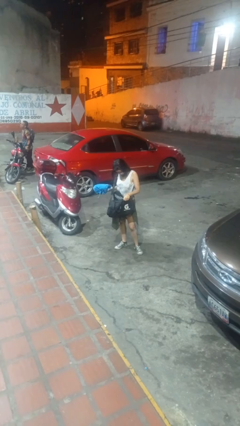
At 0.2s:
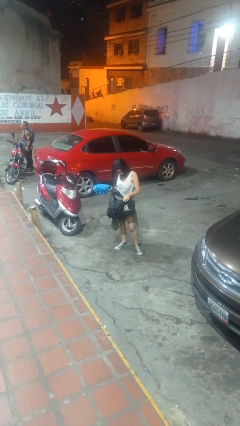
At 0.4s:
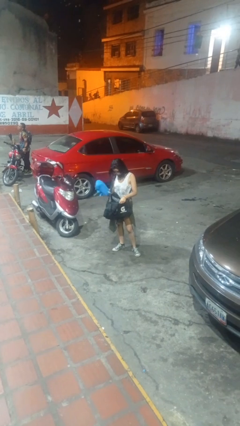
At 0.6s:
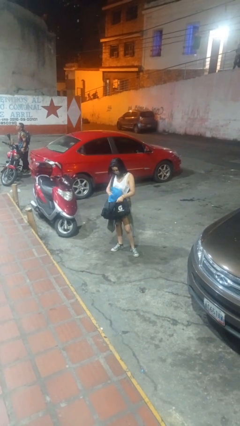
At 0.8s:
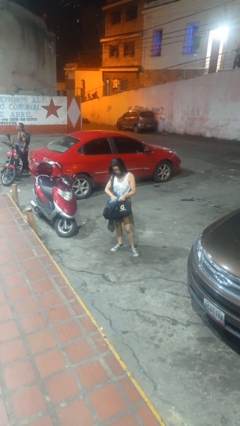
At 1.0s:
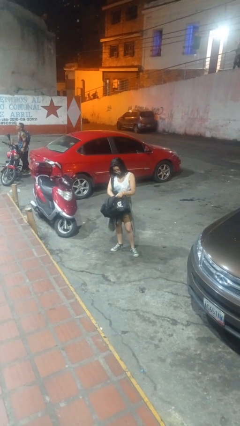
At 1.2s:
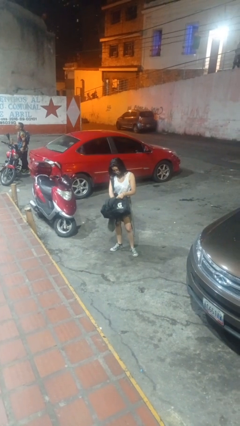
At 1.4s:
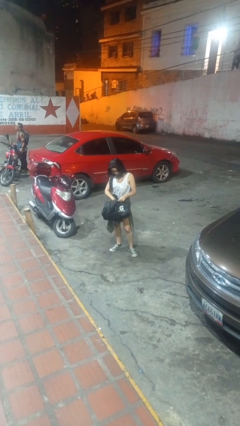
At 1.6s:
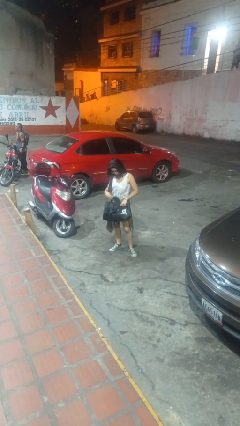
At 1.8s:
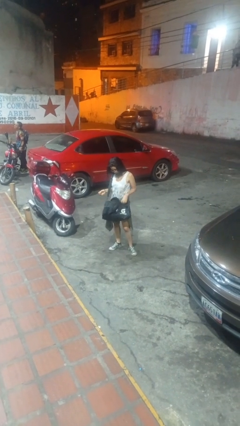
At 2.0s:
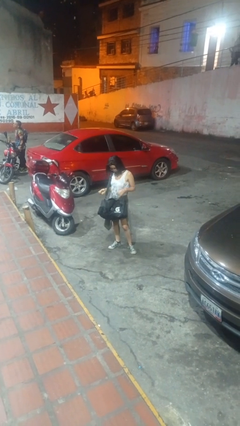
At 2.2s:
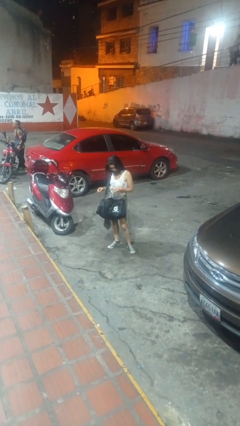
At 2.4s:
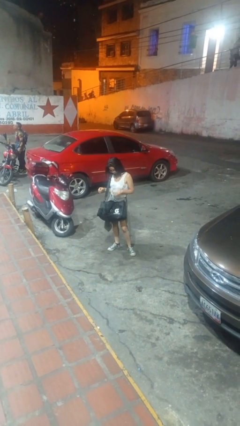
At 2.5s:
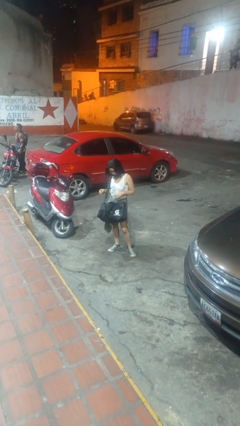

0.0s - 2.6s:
person puts object into purse

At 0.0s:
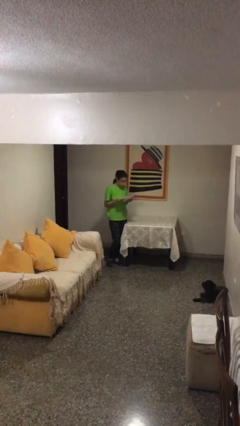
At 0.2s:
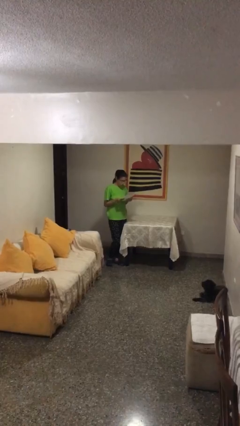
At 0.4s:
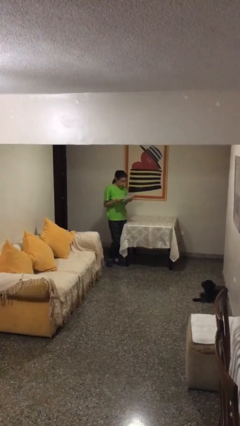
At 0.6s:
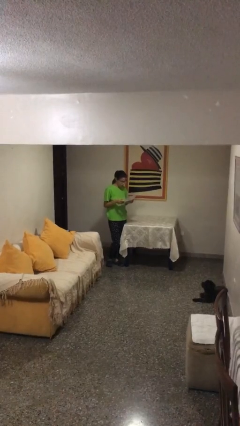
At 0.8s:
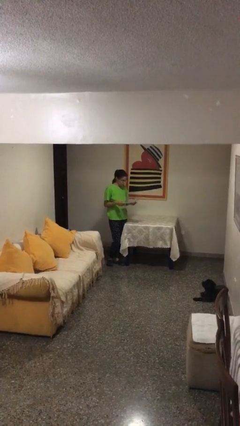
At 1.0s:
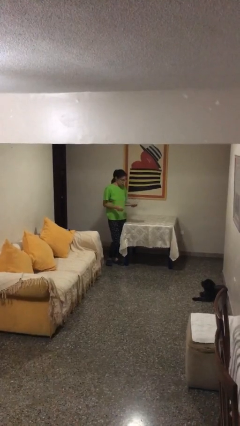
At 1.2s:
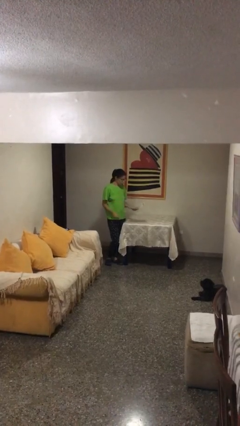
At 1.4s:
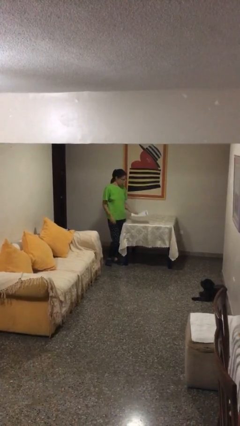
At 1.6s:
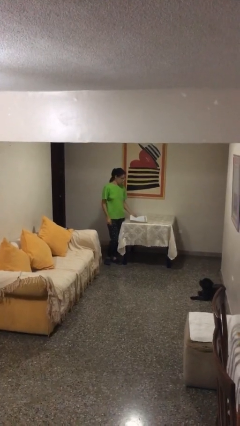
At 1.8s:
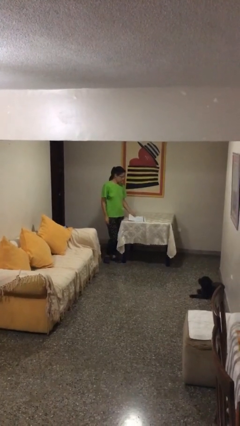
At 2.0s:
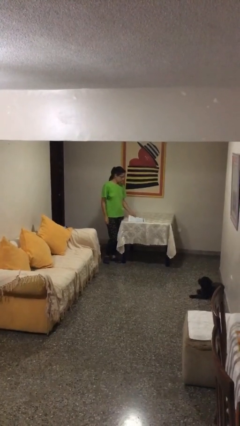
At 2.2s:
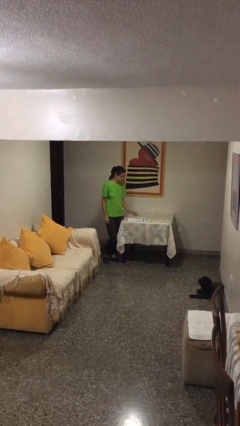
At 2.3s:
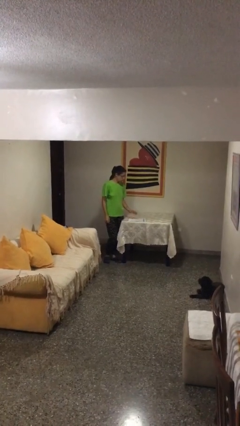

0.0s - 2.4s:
person puts down object on table

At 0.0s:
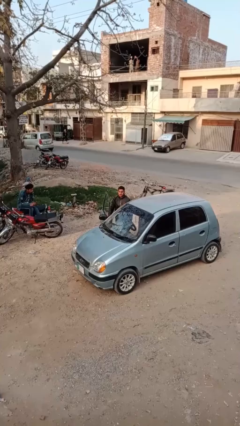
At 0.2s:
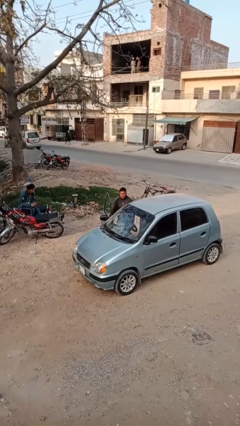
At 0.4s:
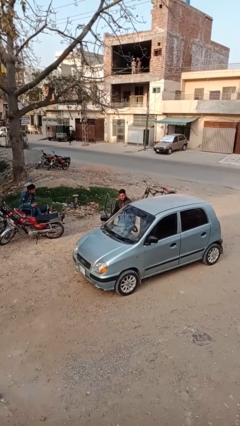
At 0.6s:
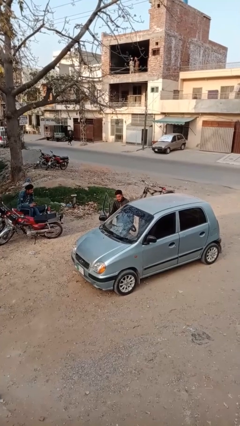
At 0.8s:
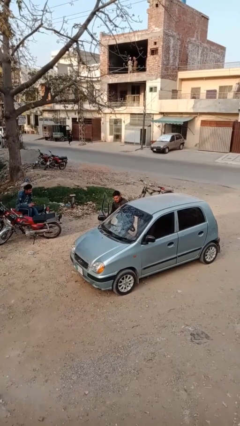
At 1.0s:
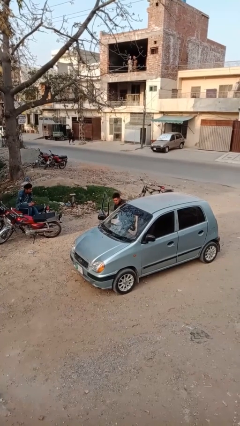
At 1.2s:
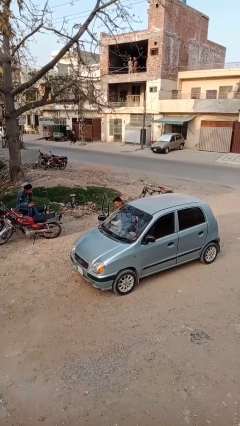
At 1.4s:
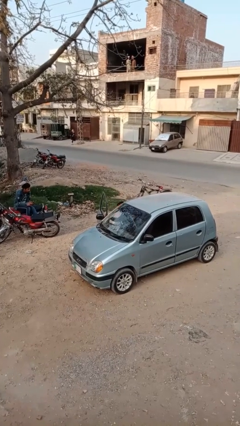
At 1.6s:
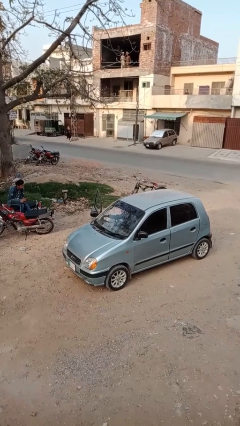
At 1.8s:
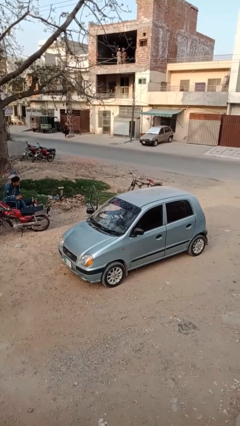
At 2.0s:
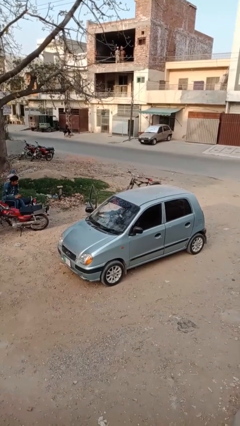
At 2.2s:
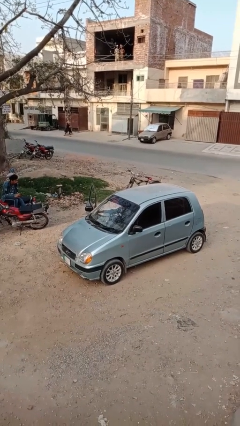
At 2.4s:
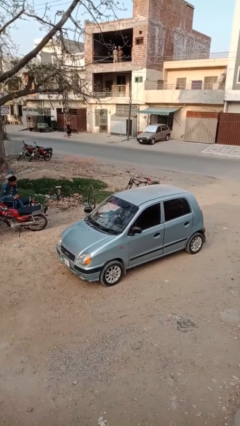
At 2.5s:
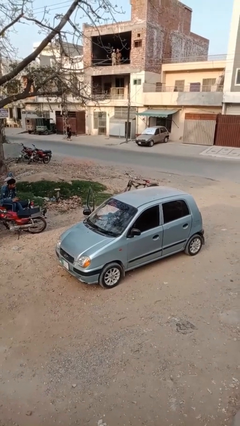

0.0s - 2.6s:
person enters car

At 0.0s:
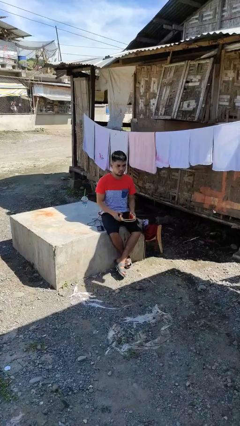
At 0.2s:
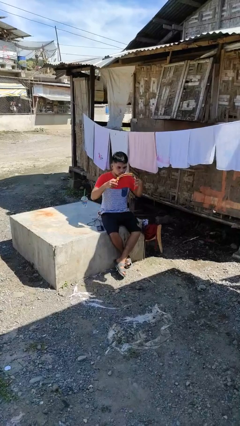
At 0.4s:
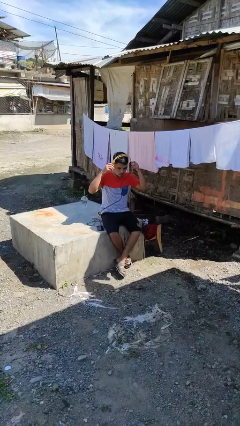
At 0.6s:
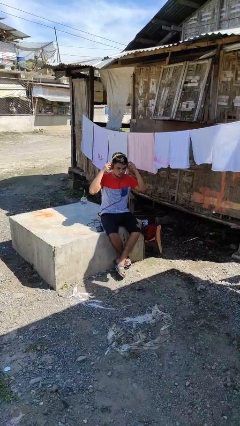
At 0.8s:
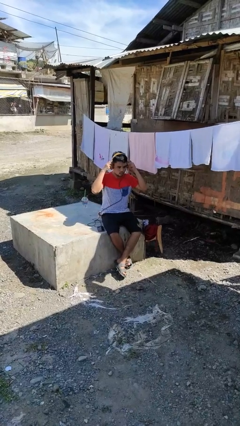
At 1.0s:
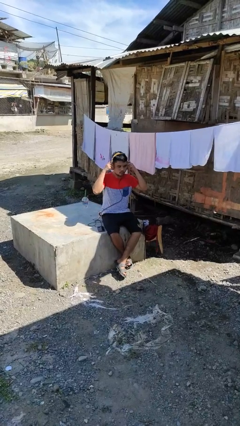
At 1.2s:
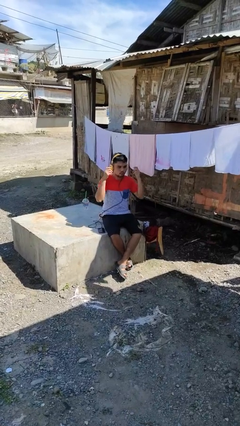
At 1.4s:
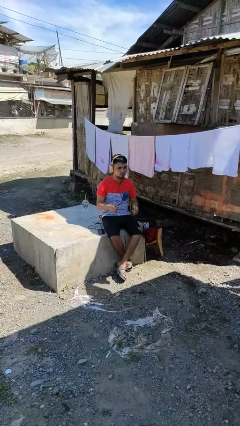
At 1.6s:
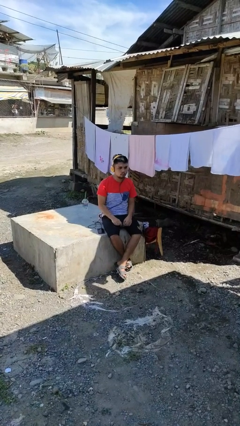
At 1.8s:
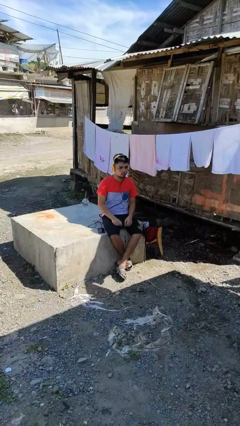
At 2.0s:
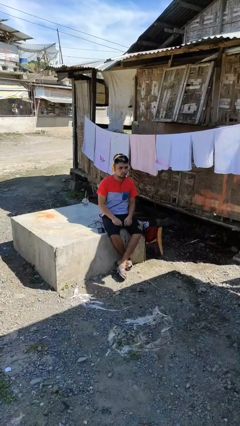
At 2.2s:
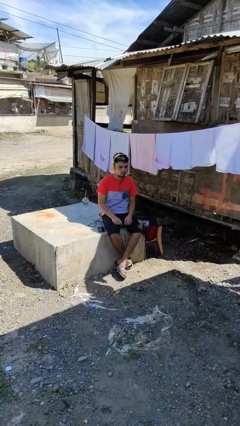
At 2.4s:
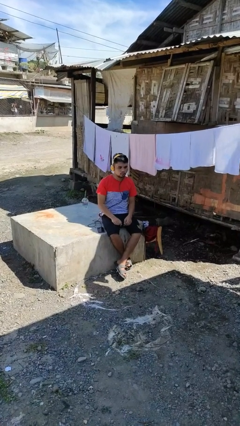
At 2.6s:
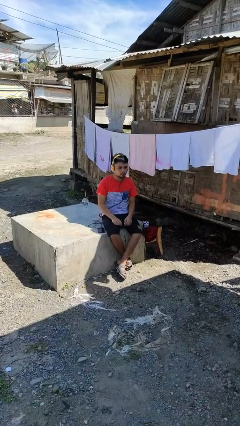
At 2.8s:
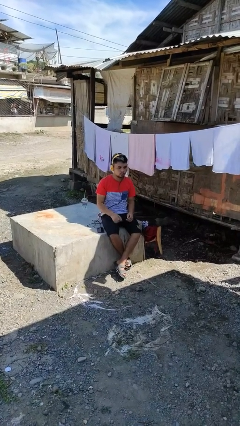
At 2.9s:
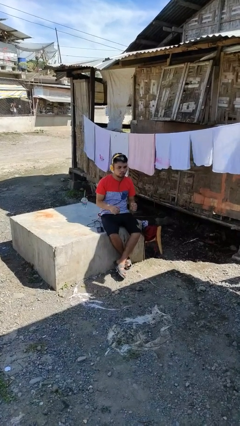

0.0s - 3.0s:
person puts on headphones

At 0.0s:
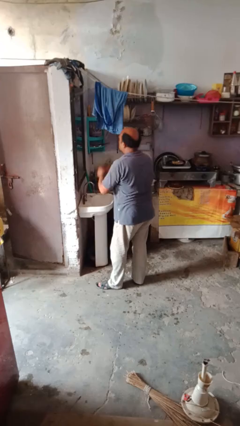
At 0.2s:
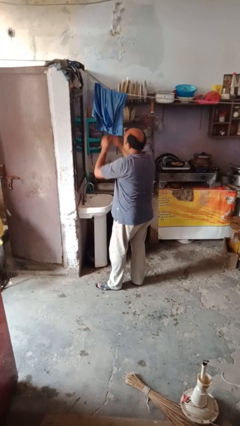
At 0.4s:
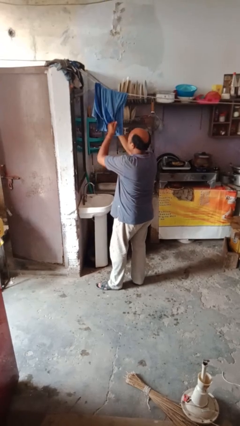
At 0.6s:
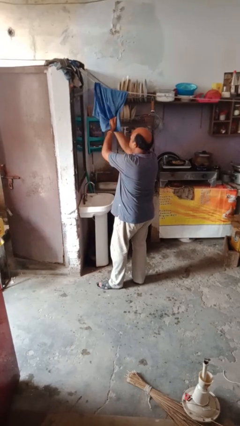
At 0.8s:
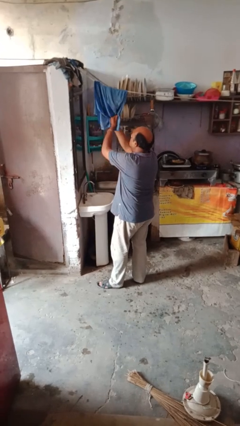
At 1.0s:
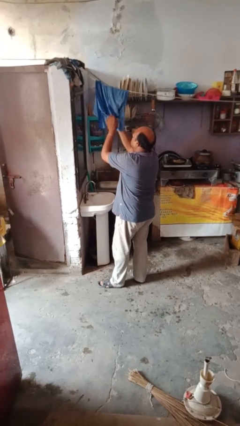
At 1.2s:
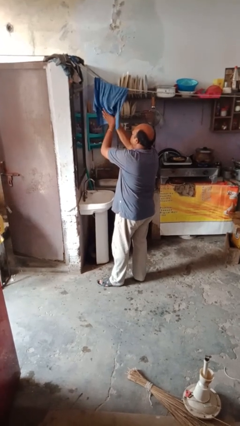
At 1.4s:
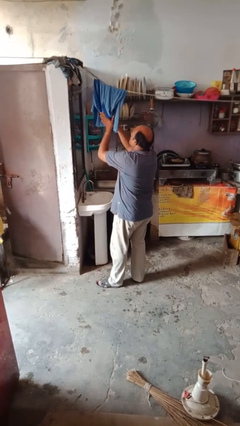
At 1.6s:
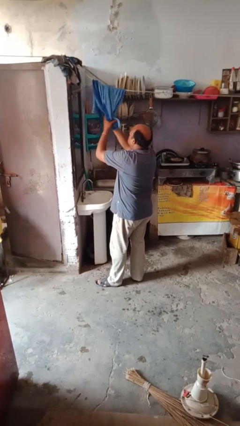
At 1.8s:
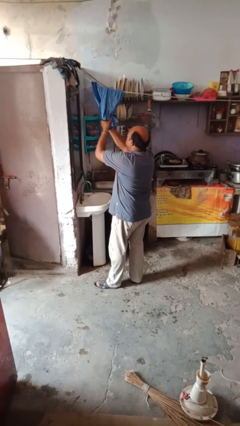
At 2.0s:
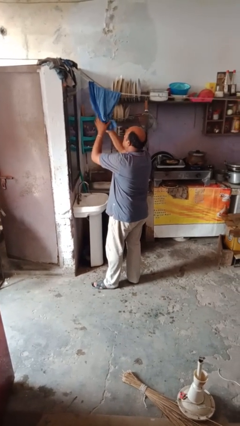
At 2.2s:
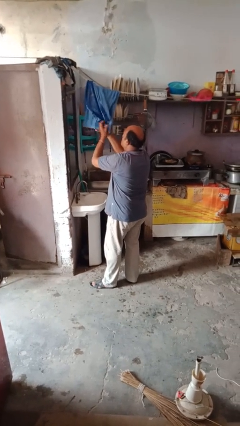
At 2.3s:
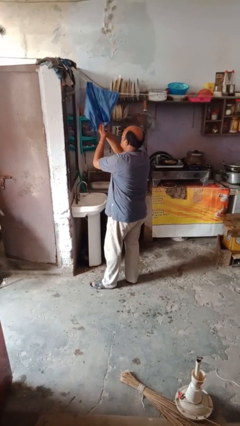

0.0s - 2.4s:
person dries hands with towel

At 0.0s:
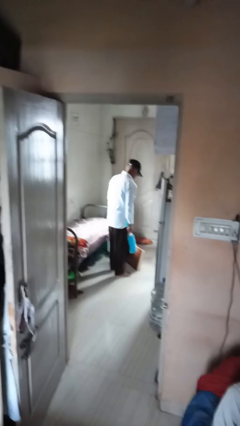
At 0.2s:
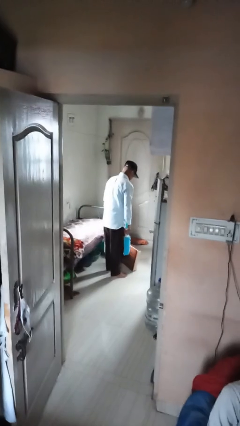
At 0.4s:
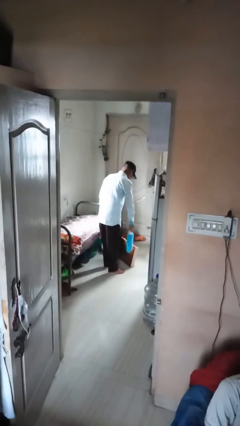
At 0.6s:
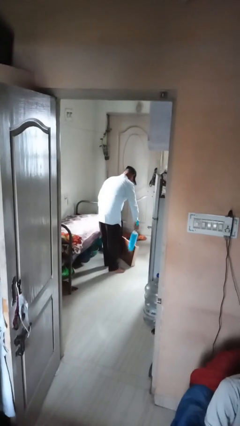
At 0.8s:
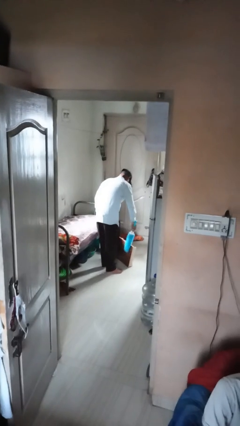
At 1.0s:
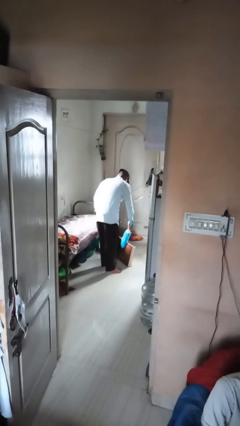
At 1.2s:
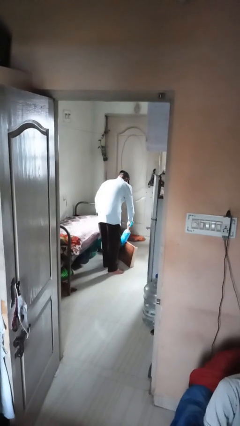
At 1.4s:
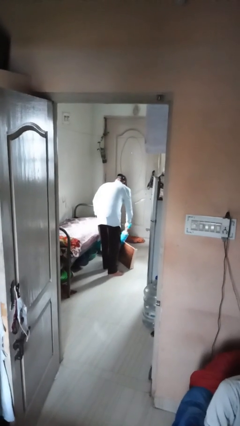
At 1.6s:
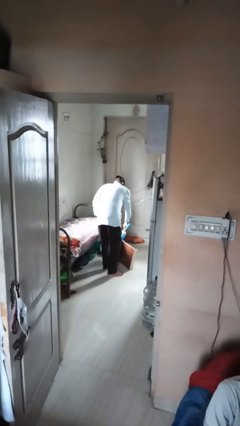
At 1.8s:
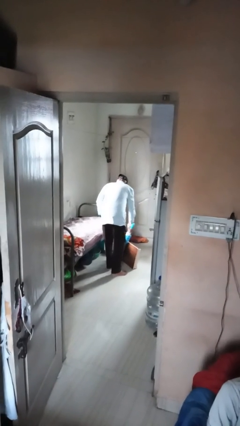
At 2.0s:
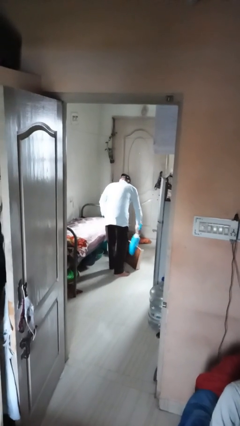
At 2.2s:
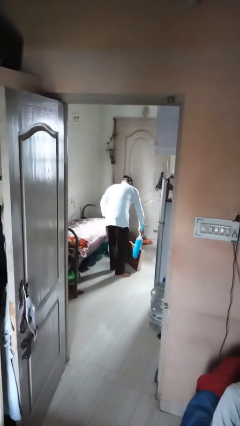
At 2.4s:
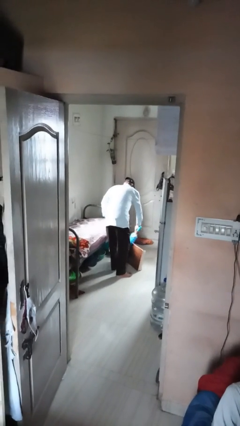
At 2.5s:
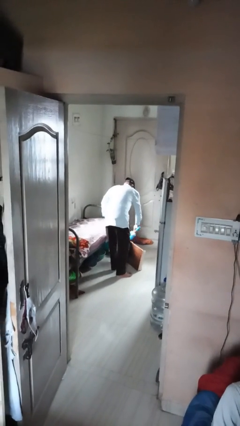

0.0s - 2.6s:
person dusts furniture

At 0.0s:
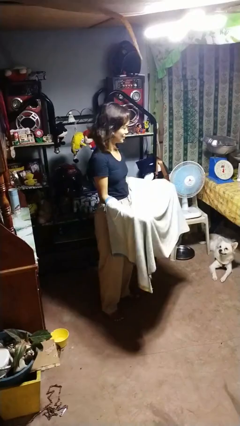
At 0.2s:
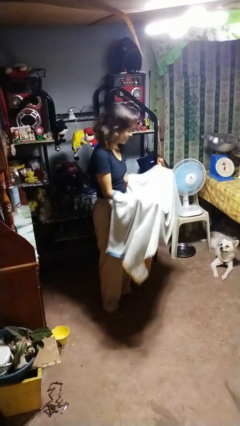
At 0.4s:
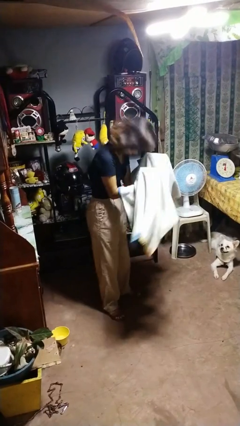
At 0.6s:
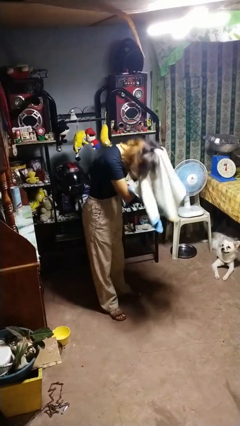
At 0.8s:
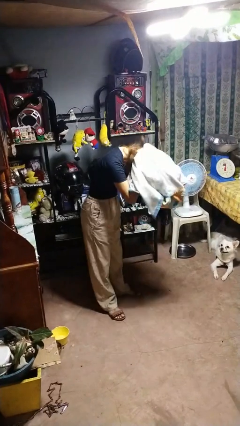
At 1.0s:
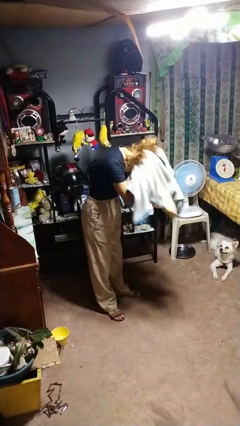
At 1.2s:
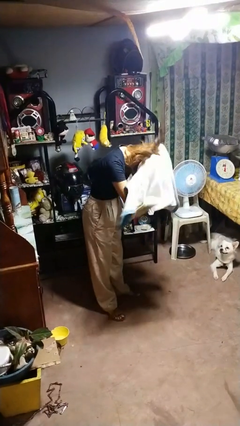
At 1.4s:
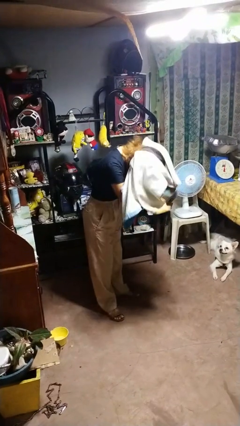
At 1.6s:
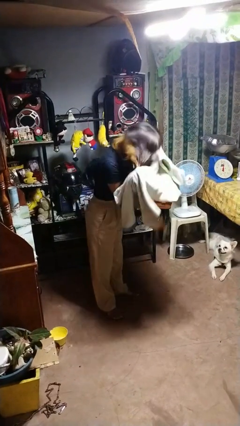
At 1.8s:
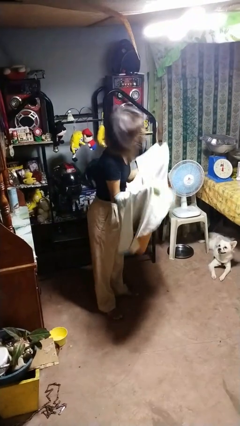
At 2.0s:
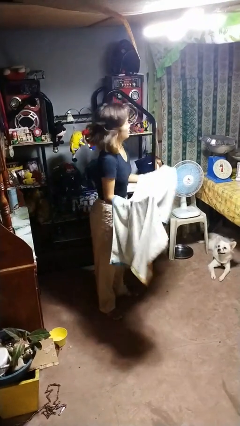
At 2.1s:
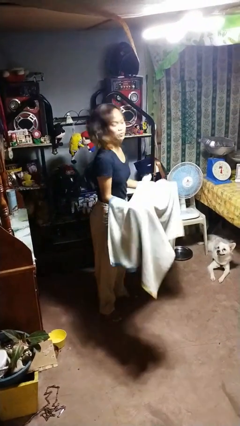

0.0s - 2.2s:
person dries hair with towel
